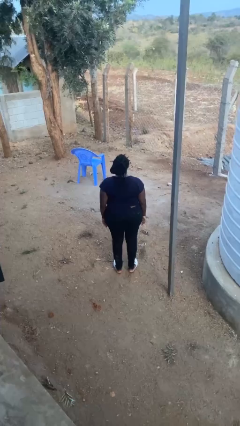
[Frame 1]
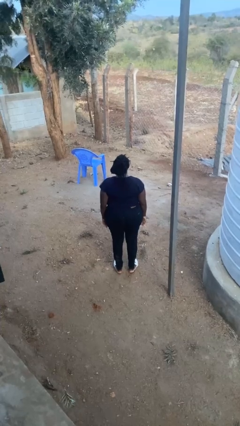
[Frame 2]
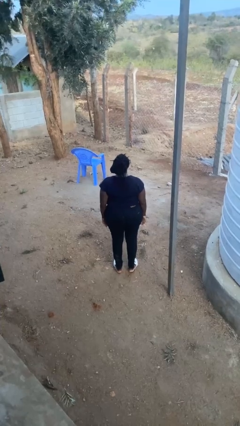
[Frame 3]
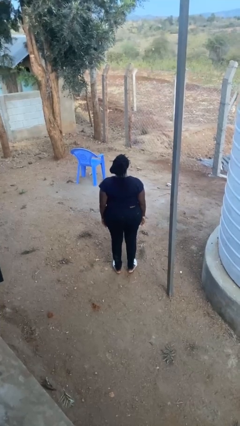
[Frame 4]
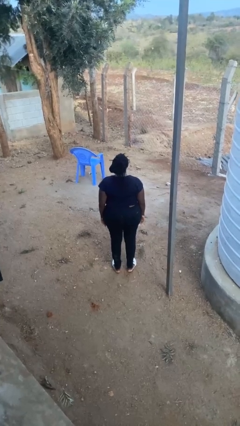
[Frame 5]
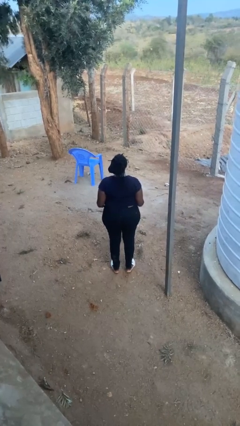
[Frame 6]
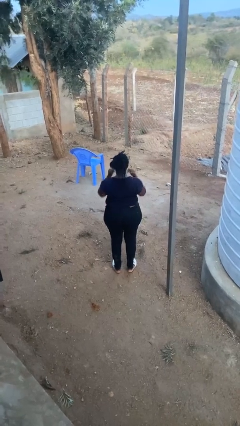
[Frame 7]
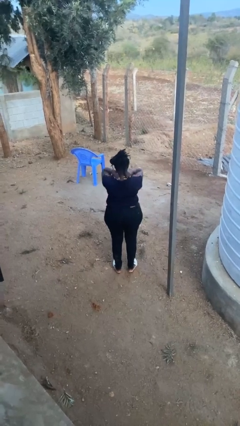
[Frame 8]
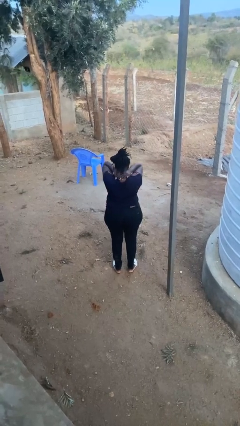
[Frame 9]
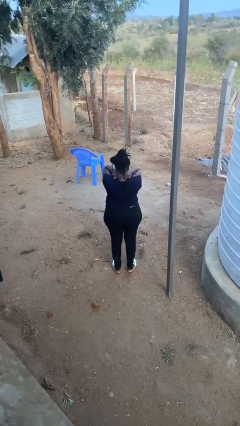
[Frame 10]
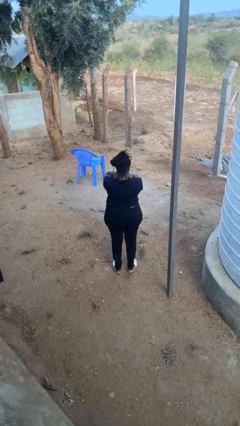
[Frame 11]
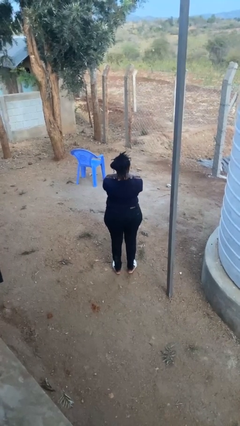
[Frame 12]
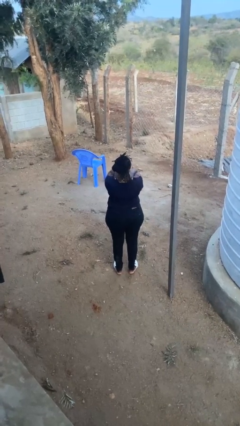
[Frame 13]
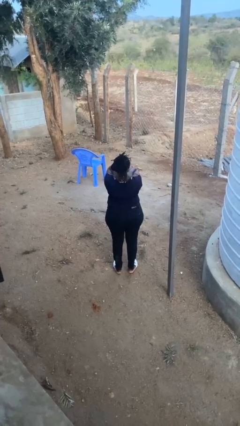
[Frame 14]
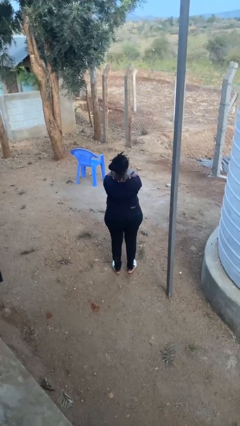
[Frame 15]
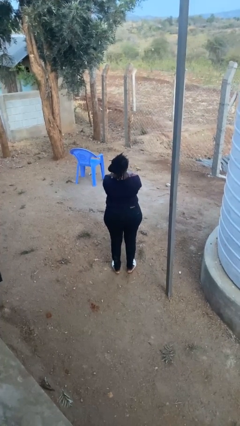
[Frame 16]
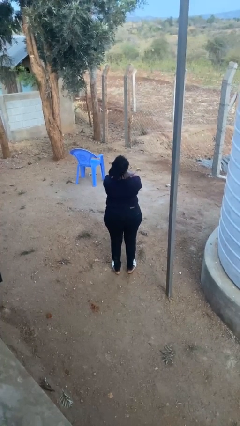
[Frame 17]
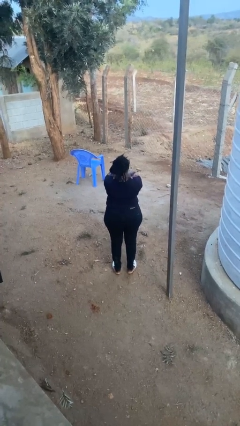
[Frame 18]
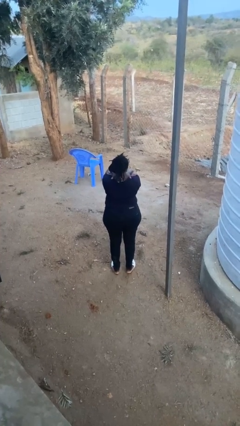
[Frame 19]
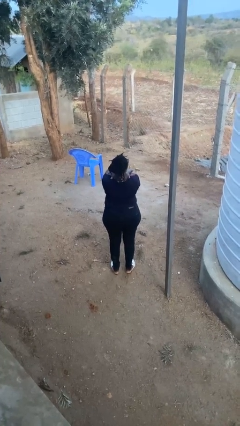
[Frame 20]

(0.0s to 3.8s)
person rubs neck

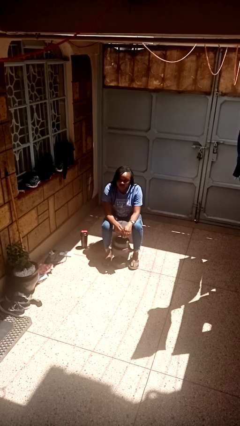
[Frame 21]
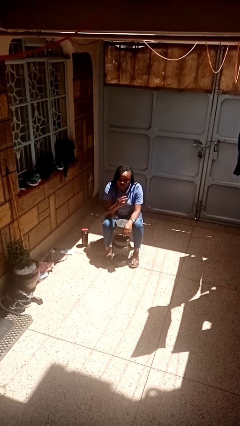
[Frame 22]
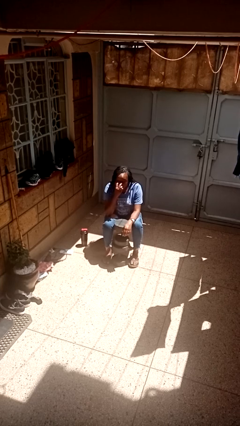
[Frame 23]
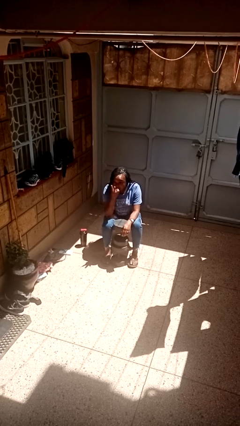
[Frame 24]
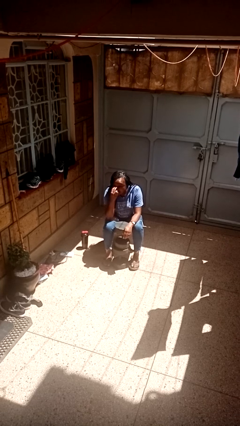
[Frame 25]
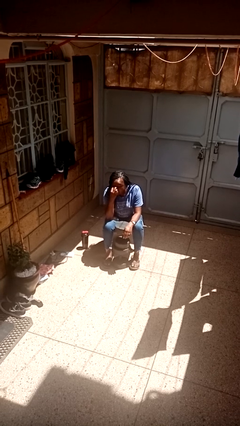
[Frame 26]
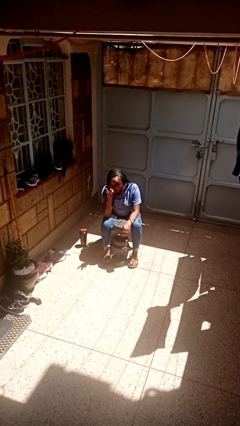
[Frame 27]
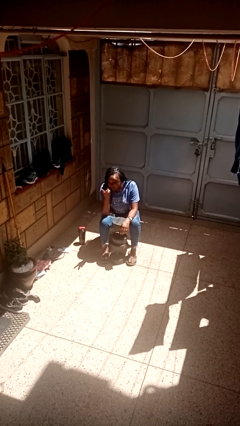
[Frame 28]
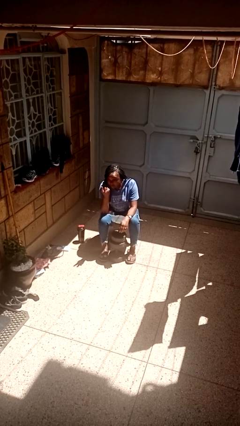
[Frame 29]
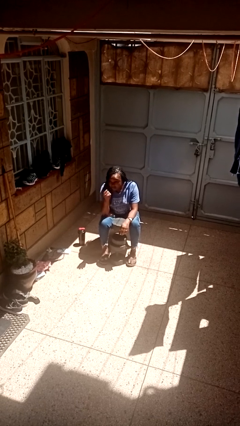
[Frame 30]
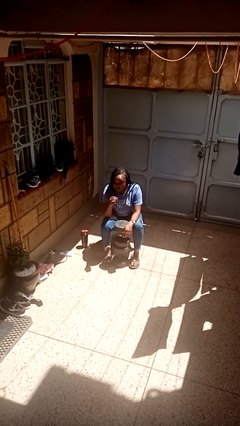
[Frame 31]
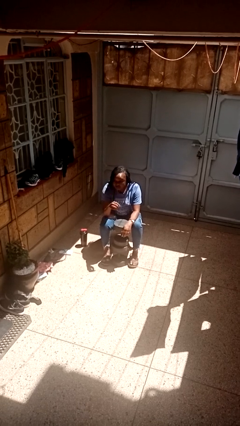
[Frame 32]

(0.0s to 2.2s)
person gestures watch closely

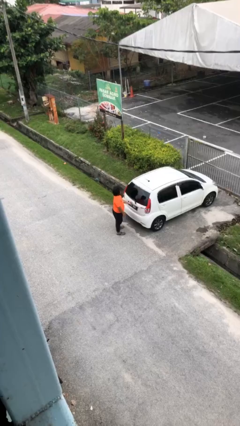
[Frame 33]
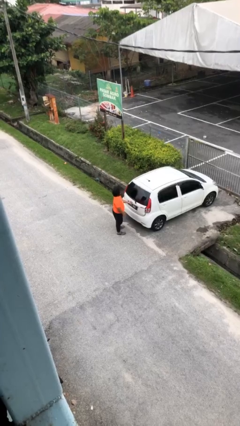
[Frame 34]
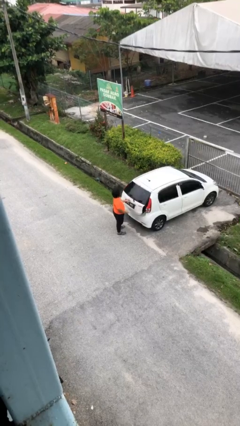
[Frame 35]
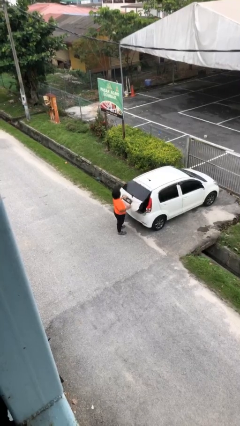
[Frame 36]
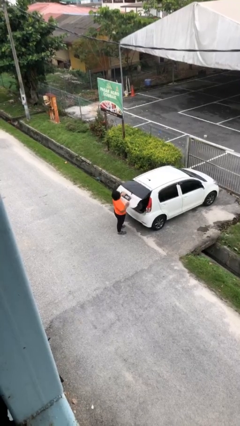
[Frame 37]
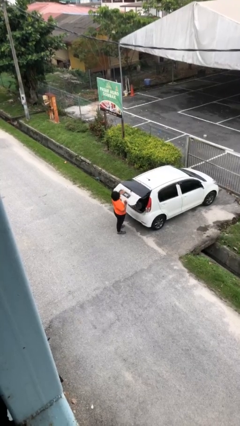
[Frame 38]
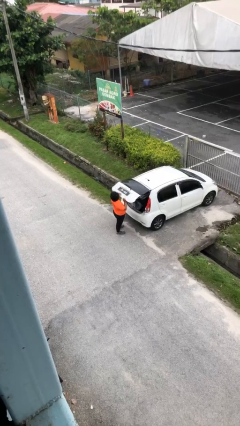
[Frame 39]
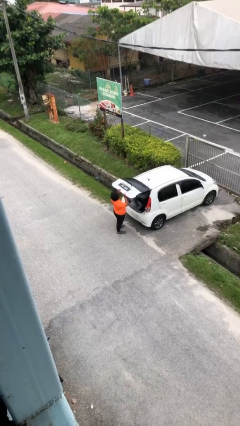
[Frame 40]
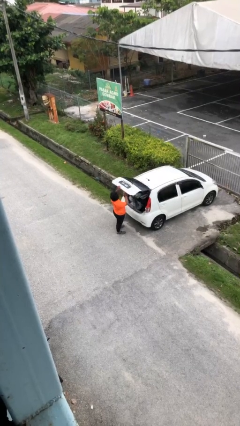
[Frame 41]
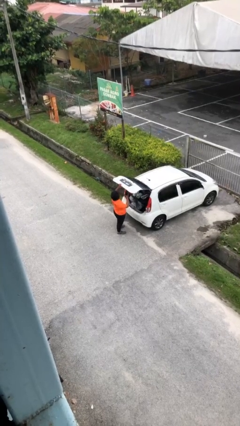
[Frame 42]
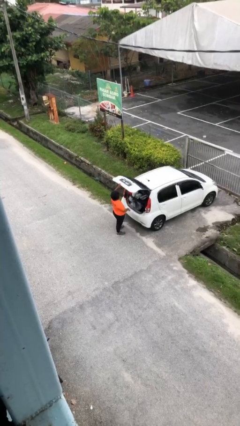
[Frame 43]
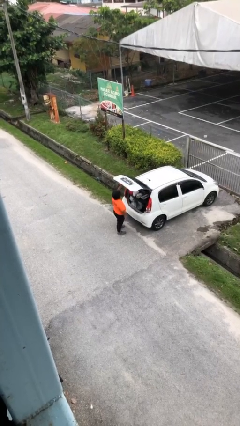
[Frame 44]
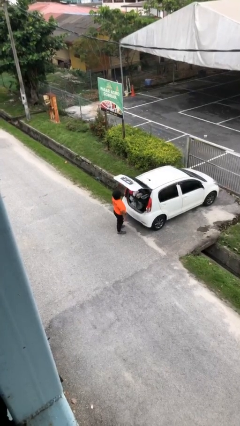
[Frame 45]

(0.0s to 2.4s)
person opens car trunk

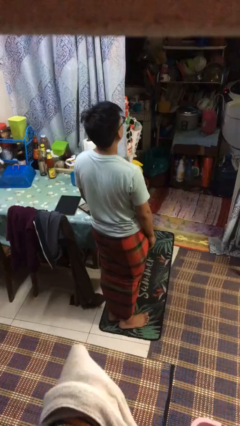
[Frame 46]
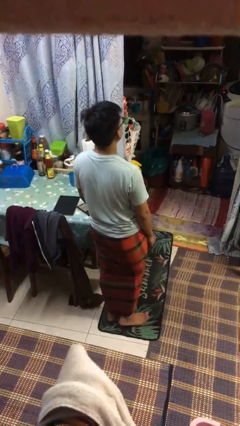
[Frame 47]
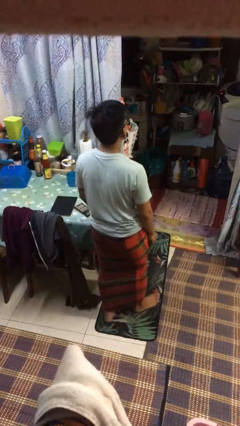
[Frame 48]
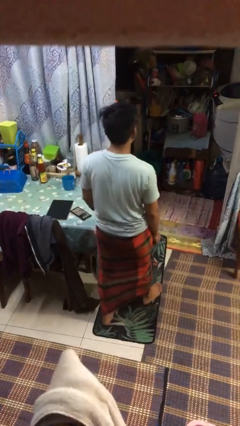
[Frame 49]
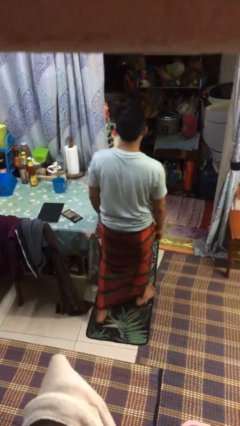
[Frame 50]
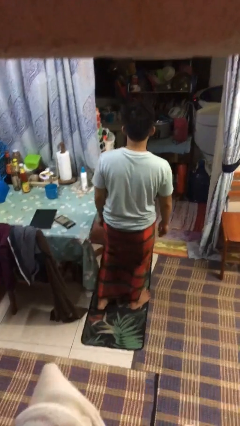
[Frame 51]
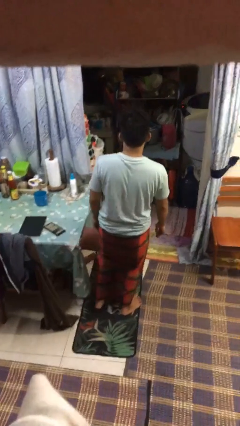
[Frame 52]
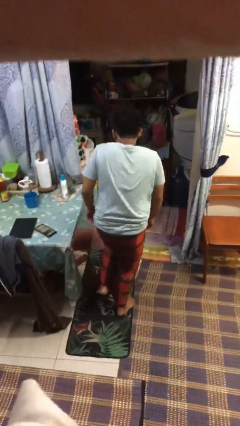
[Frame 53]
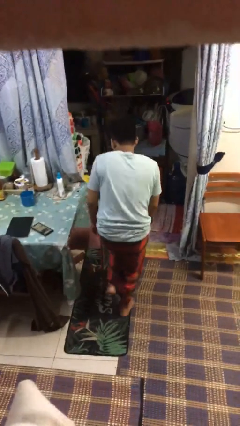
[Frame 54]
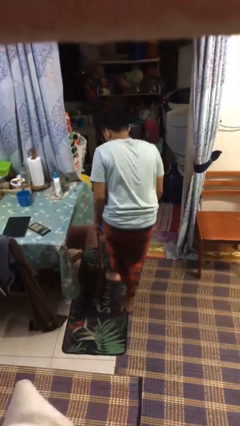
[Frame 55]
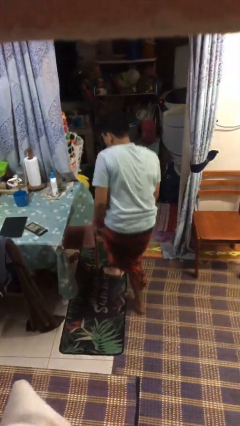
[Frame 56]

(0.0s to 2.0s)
person stubs toe

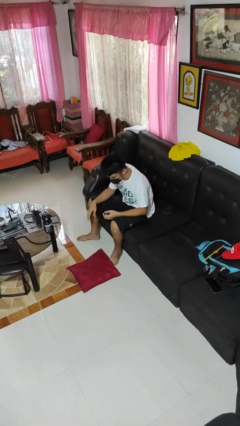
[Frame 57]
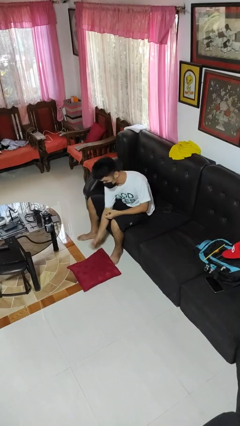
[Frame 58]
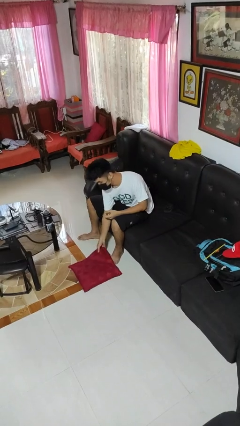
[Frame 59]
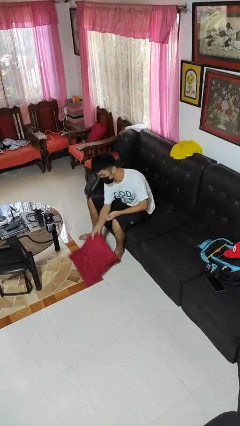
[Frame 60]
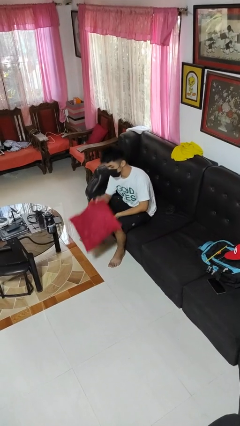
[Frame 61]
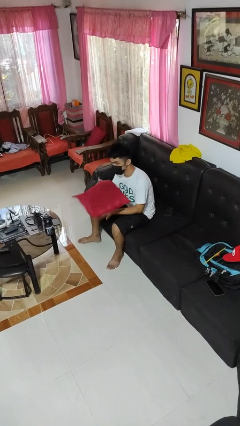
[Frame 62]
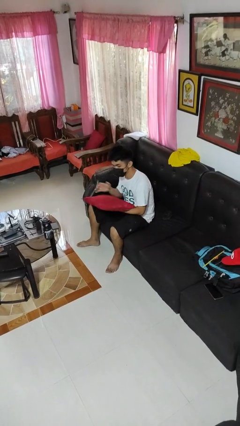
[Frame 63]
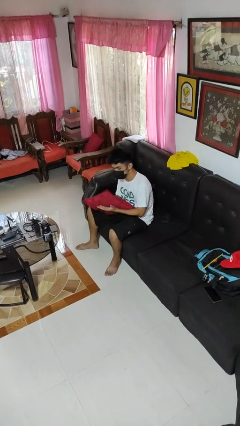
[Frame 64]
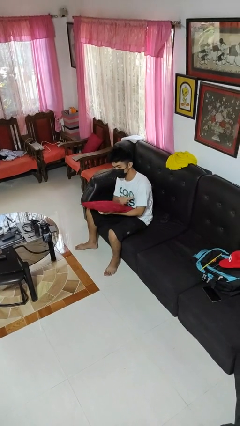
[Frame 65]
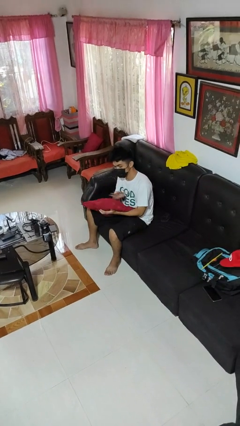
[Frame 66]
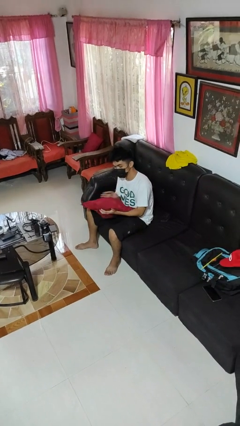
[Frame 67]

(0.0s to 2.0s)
person picks up object from floor

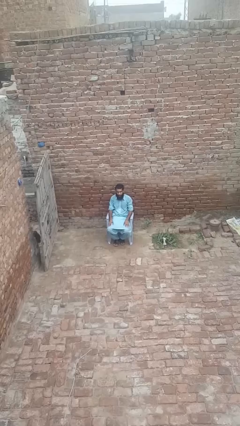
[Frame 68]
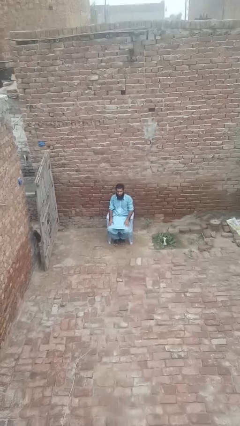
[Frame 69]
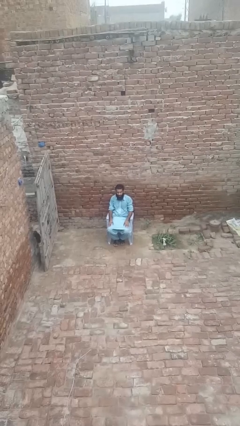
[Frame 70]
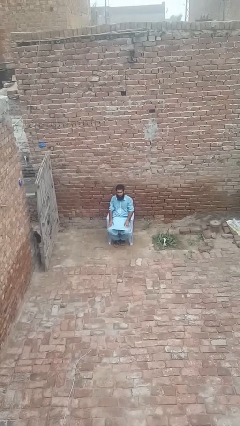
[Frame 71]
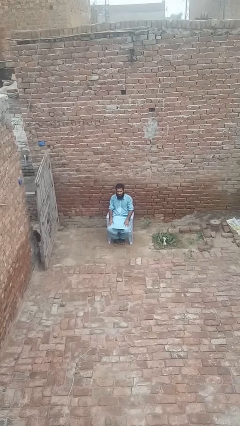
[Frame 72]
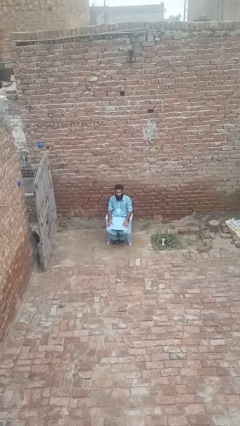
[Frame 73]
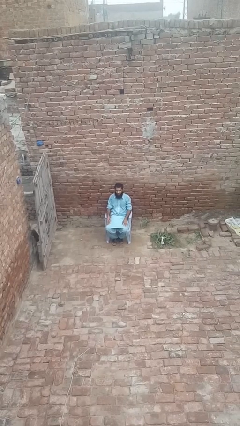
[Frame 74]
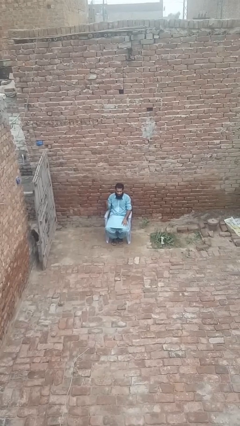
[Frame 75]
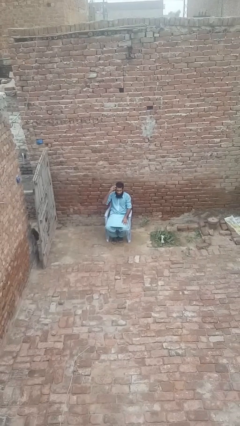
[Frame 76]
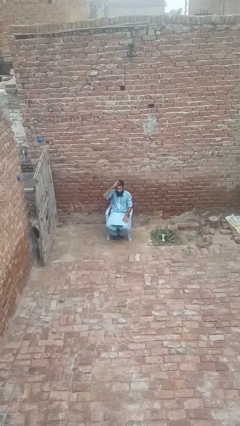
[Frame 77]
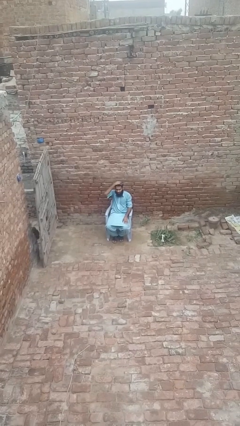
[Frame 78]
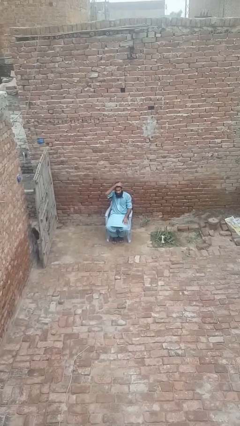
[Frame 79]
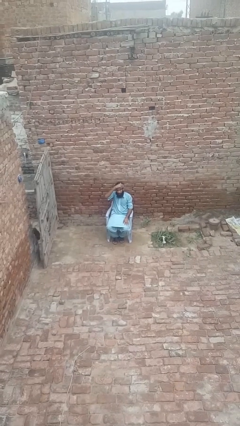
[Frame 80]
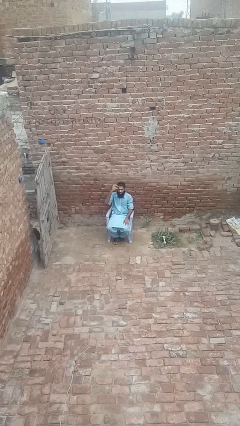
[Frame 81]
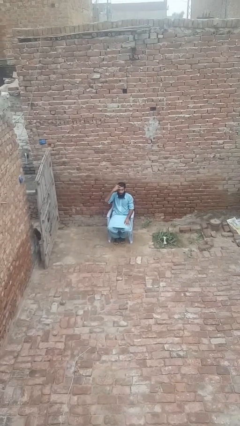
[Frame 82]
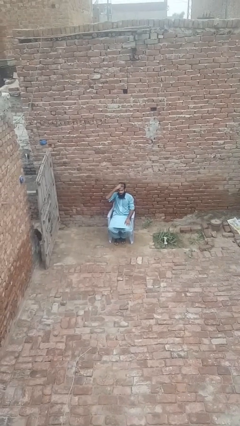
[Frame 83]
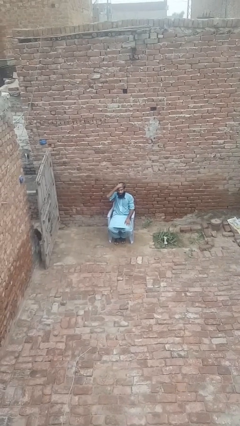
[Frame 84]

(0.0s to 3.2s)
person strokes hair

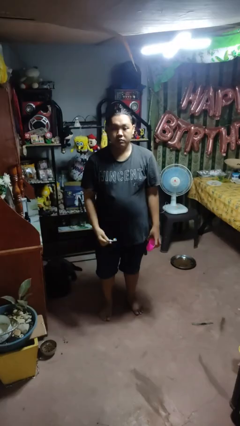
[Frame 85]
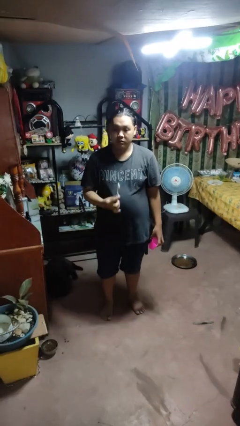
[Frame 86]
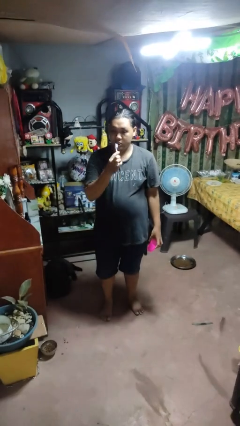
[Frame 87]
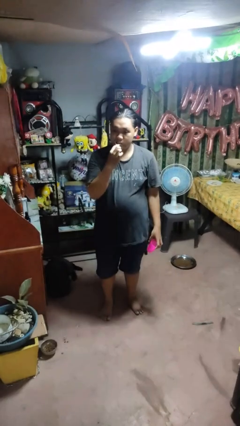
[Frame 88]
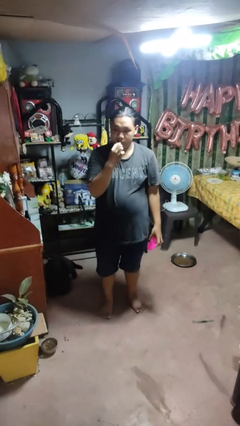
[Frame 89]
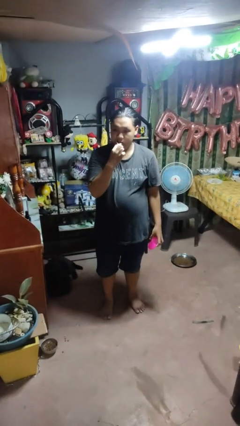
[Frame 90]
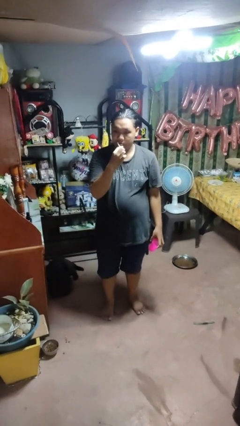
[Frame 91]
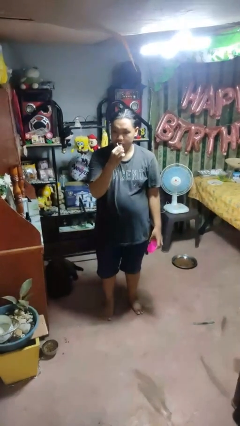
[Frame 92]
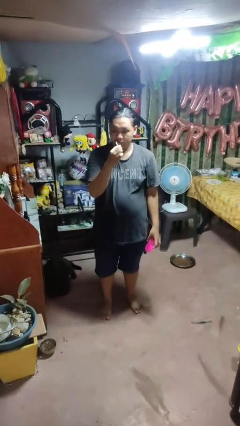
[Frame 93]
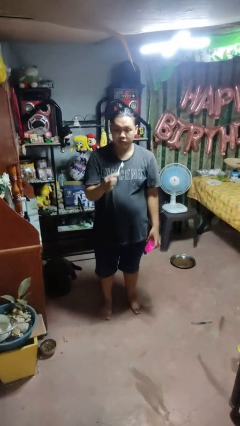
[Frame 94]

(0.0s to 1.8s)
person brushes teeth
